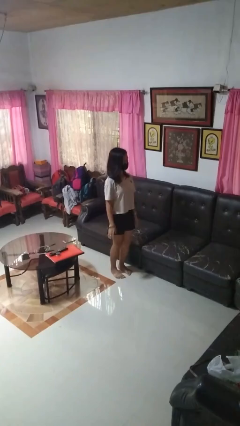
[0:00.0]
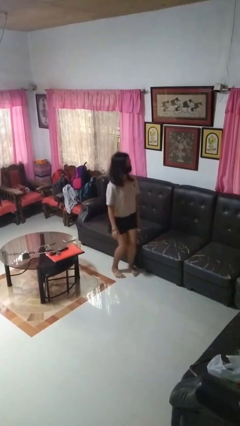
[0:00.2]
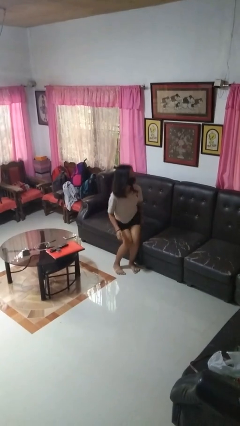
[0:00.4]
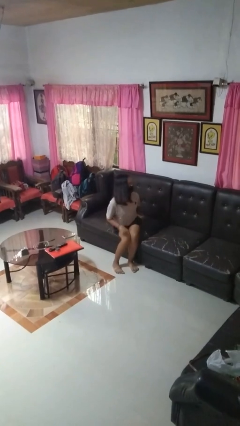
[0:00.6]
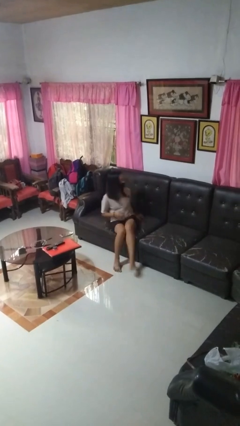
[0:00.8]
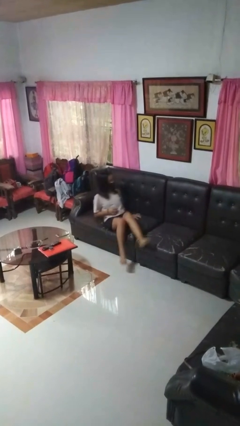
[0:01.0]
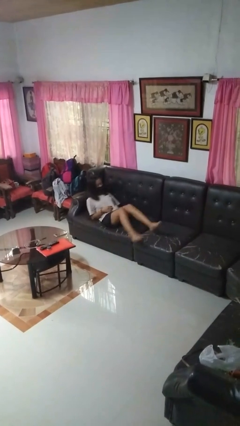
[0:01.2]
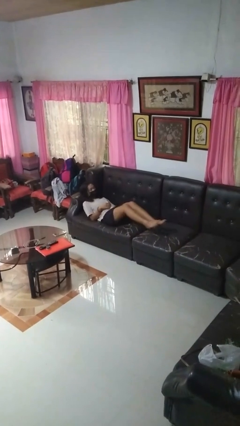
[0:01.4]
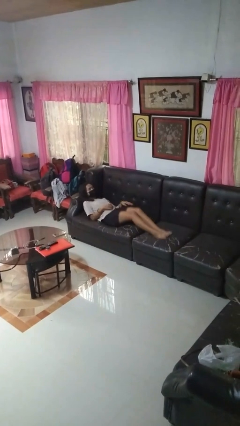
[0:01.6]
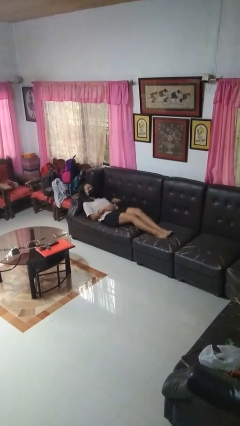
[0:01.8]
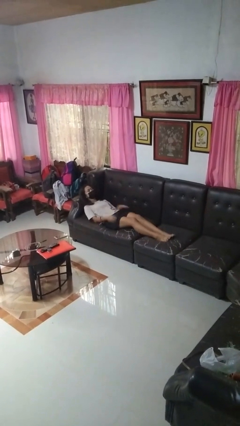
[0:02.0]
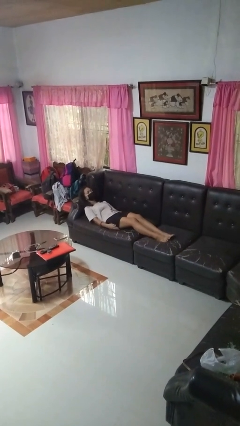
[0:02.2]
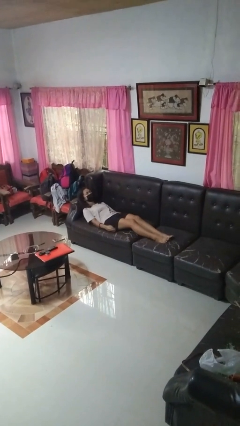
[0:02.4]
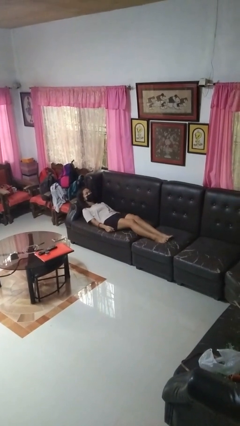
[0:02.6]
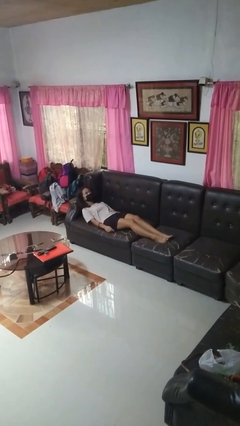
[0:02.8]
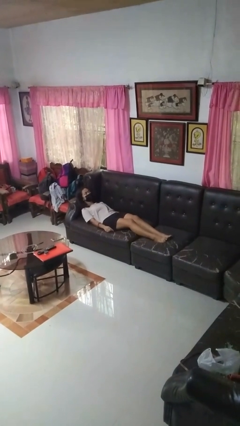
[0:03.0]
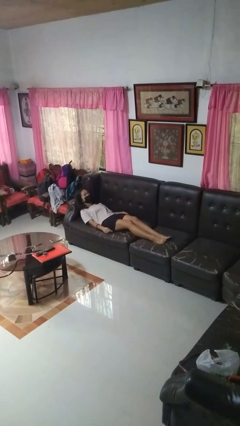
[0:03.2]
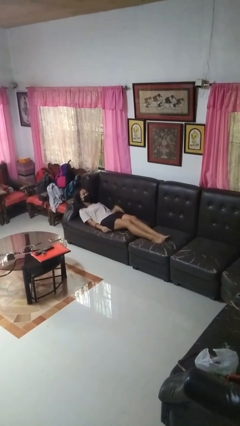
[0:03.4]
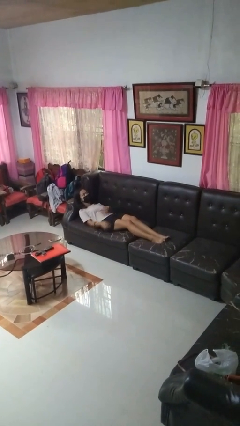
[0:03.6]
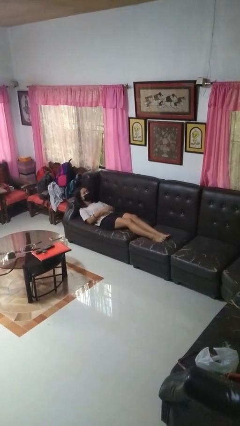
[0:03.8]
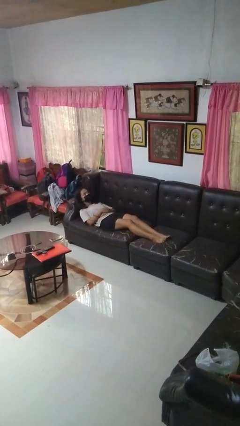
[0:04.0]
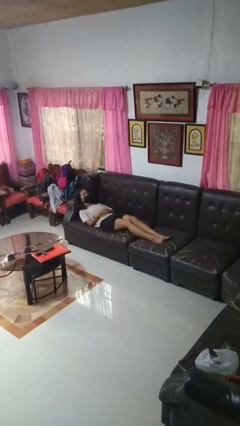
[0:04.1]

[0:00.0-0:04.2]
person lies down on couch

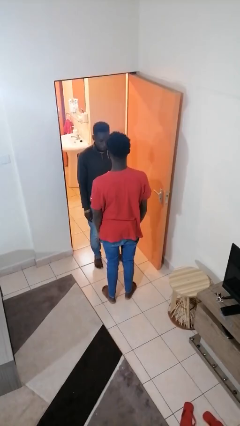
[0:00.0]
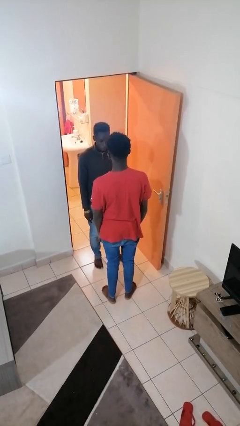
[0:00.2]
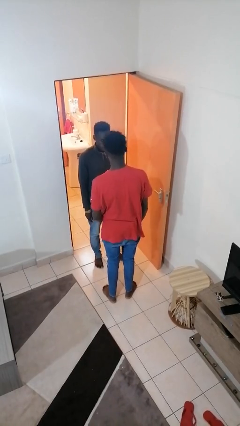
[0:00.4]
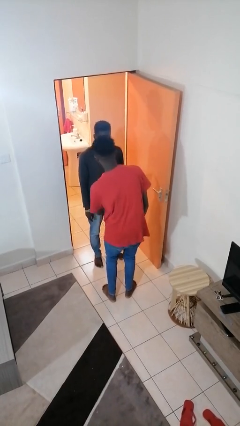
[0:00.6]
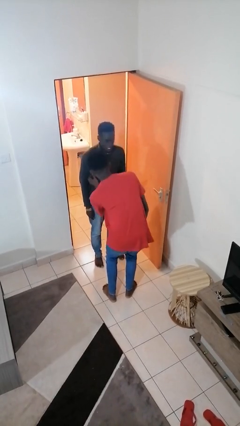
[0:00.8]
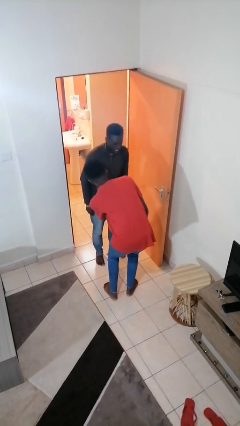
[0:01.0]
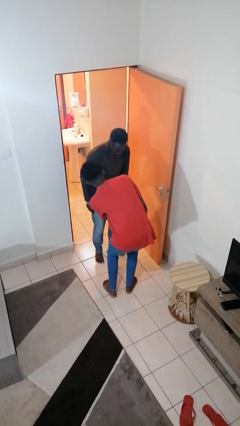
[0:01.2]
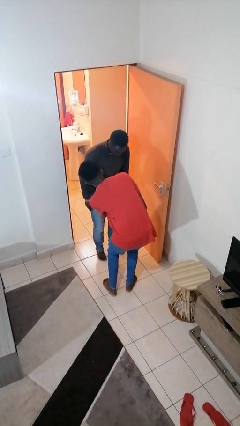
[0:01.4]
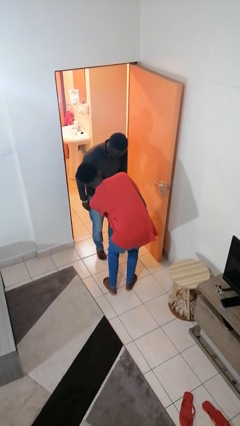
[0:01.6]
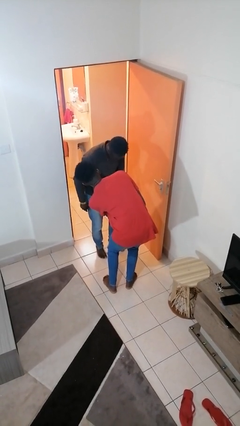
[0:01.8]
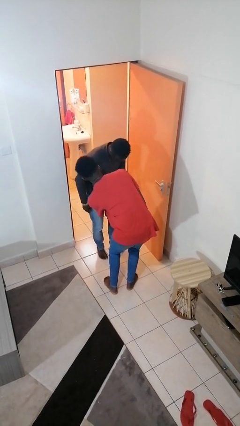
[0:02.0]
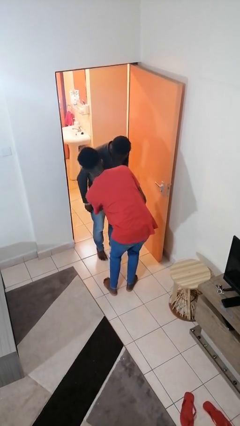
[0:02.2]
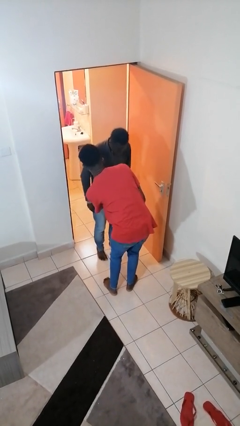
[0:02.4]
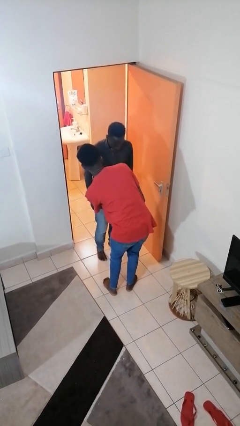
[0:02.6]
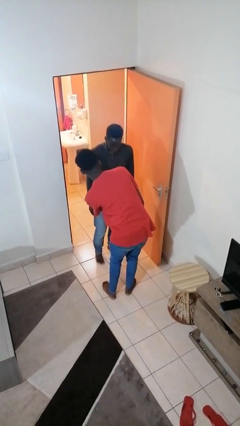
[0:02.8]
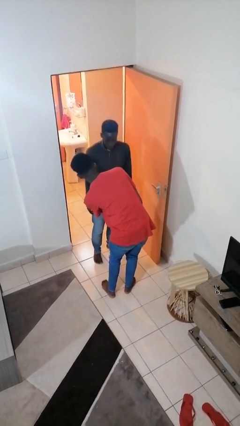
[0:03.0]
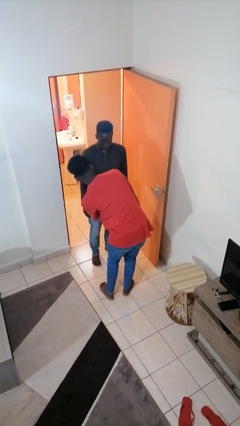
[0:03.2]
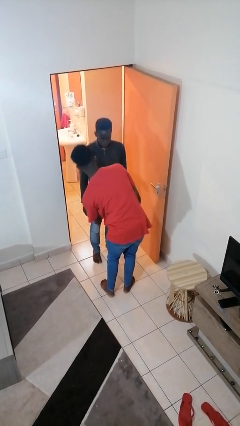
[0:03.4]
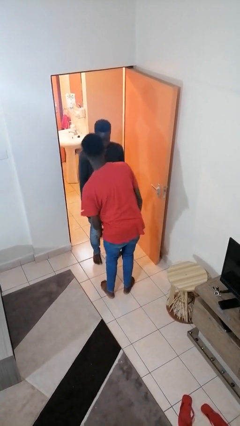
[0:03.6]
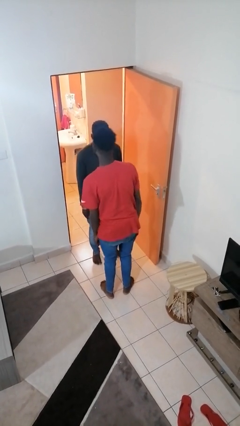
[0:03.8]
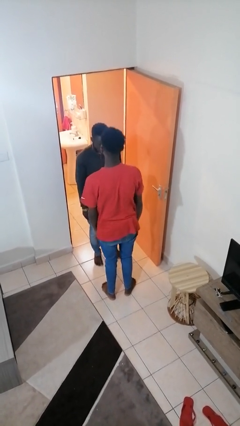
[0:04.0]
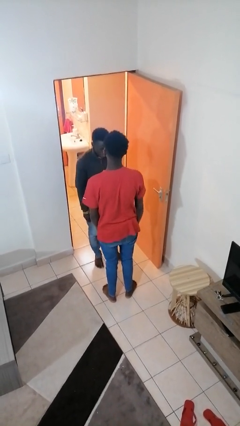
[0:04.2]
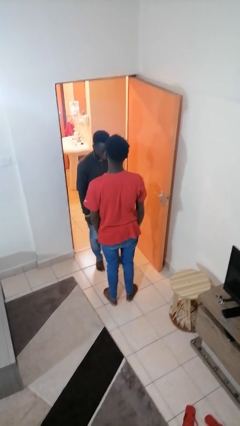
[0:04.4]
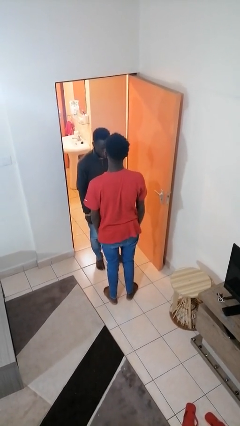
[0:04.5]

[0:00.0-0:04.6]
person tickles person

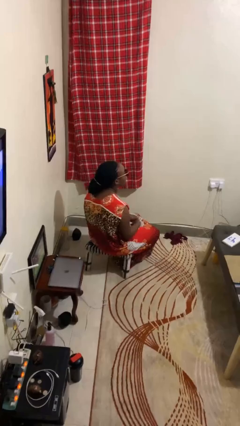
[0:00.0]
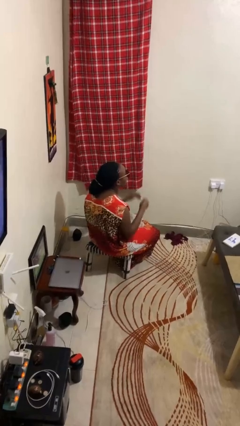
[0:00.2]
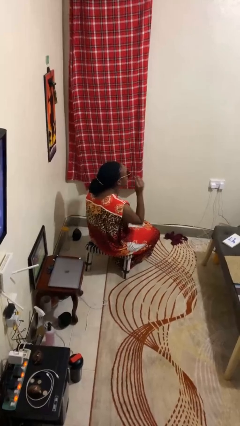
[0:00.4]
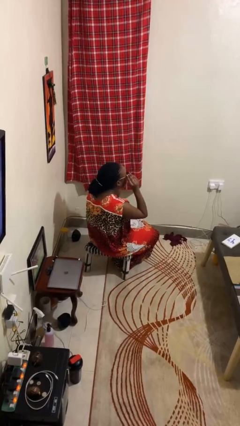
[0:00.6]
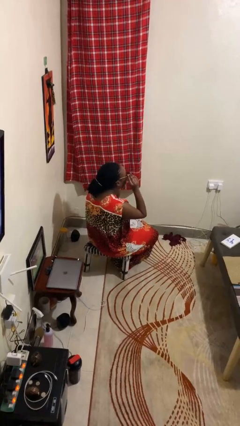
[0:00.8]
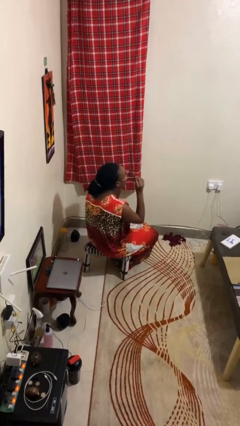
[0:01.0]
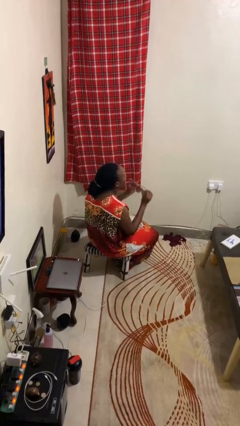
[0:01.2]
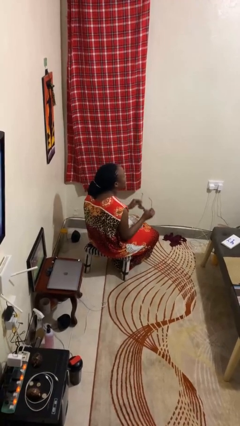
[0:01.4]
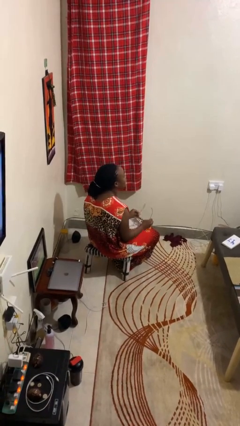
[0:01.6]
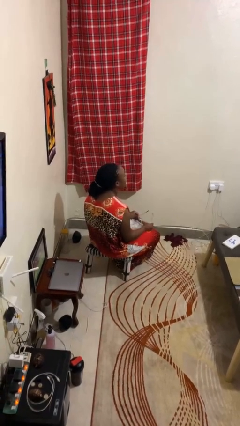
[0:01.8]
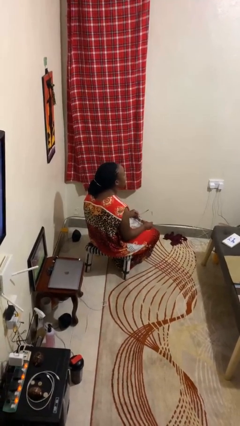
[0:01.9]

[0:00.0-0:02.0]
person takes off sunglasses

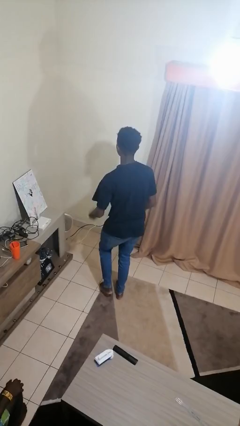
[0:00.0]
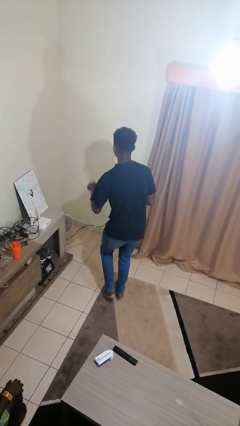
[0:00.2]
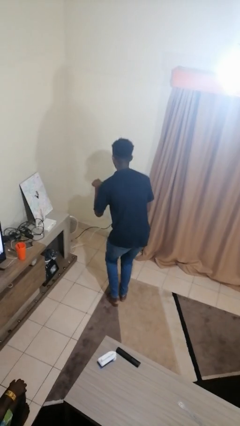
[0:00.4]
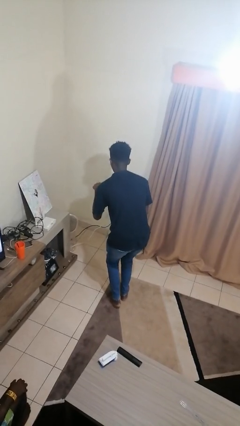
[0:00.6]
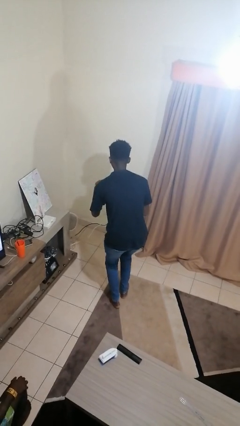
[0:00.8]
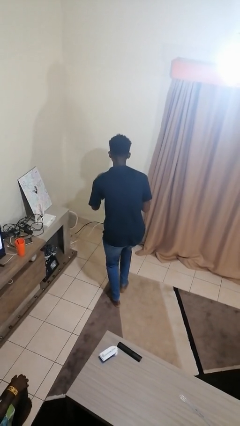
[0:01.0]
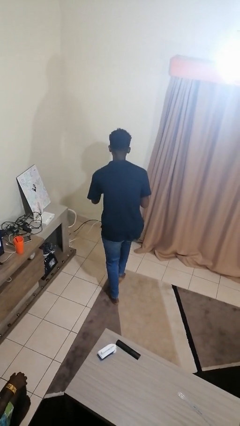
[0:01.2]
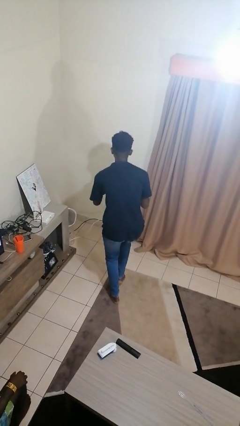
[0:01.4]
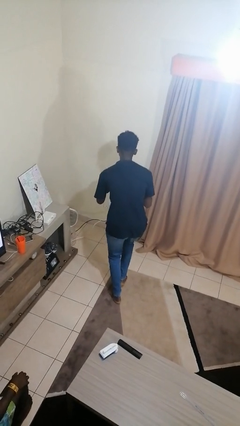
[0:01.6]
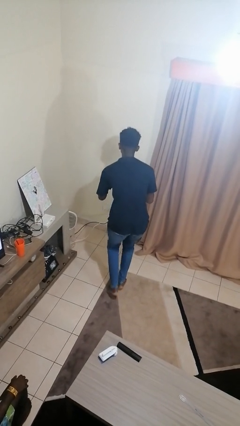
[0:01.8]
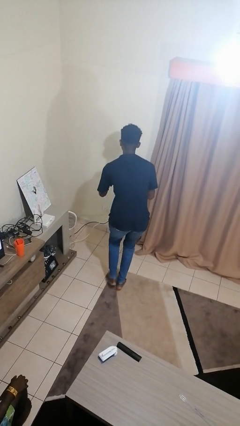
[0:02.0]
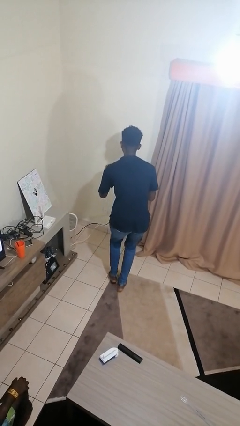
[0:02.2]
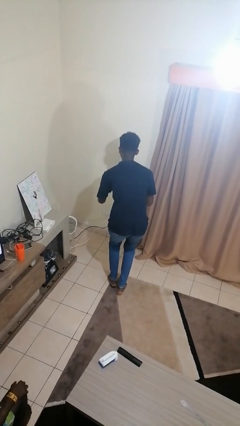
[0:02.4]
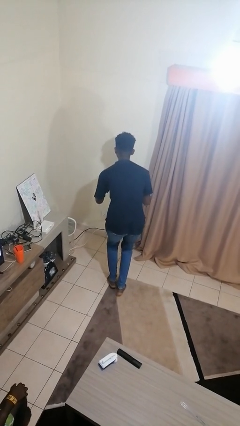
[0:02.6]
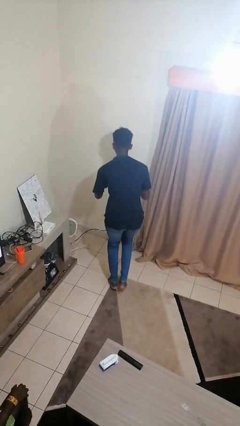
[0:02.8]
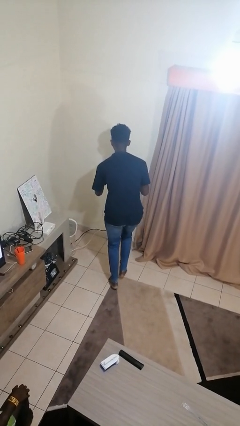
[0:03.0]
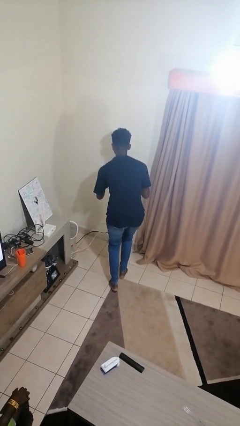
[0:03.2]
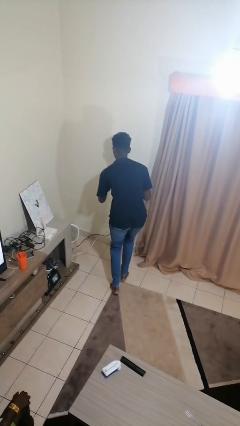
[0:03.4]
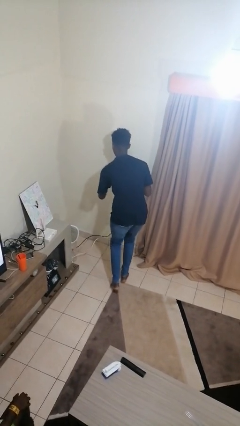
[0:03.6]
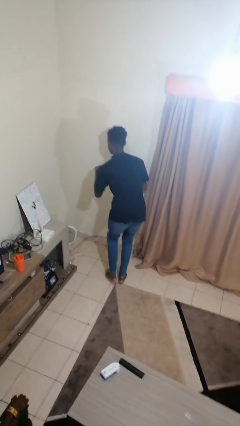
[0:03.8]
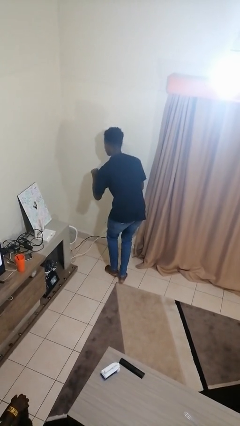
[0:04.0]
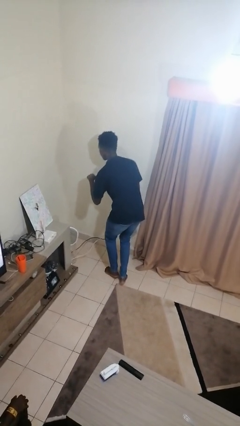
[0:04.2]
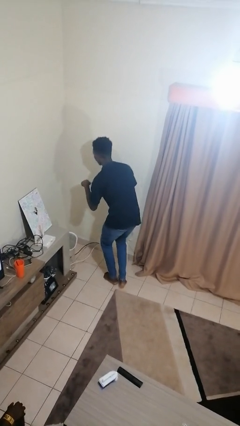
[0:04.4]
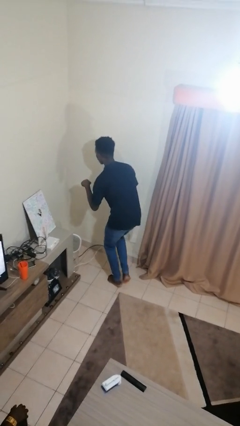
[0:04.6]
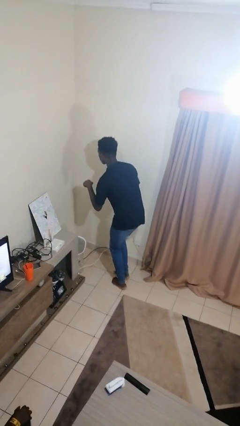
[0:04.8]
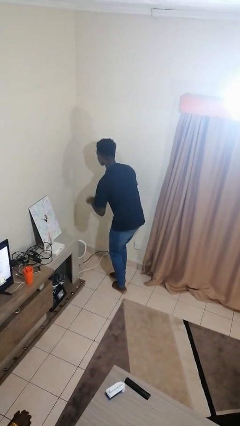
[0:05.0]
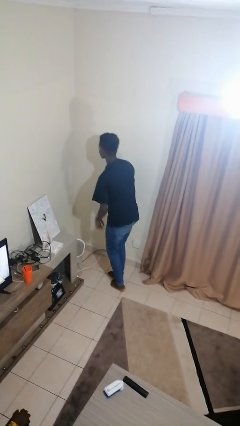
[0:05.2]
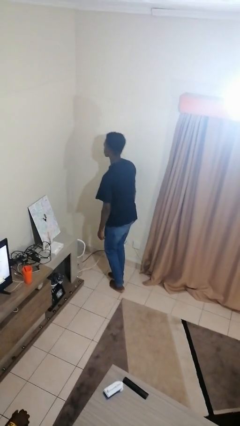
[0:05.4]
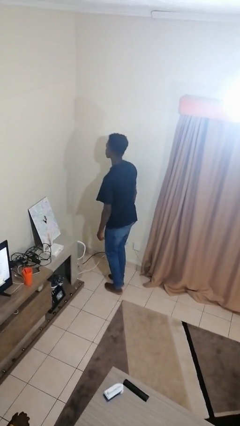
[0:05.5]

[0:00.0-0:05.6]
person walks tiptoe

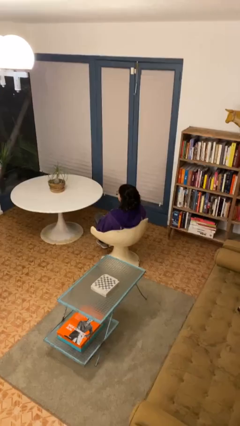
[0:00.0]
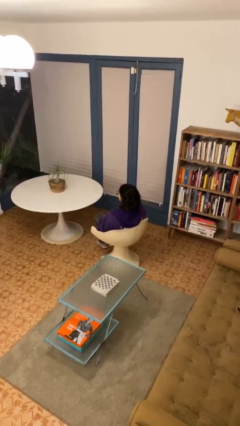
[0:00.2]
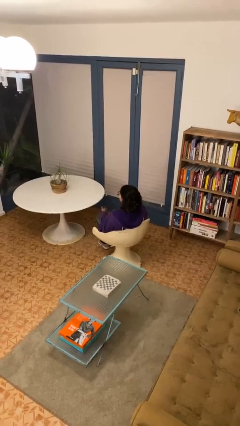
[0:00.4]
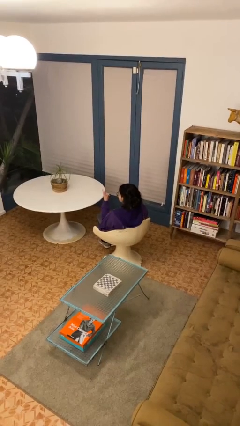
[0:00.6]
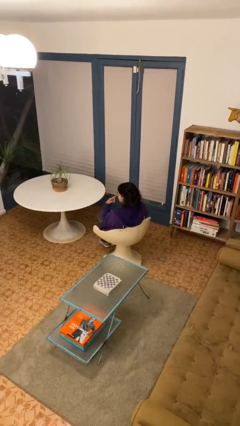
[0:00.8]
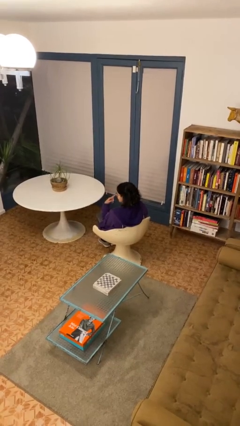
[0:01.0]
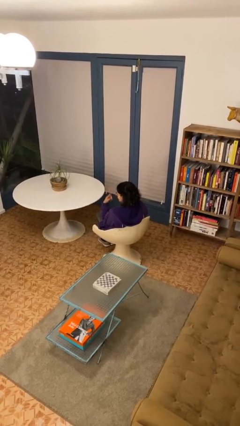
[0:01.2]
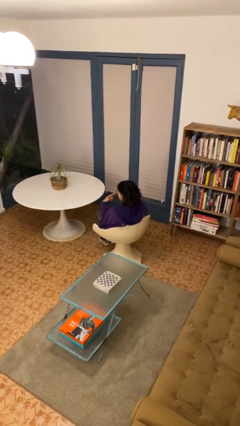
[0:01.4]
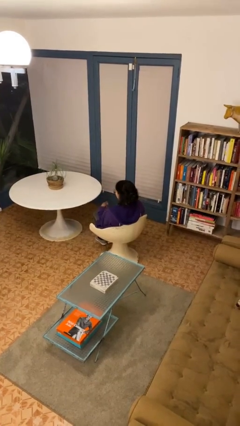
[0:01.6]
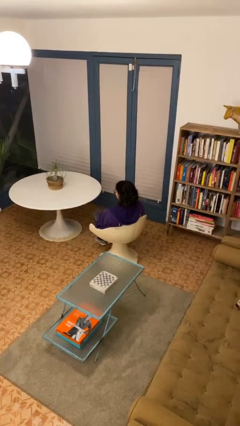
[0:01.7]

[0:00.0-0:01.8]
person gestures watch closely
